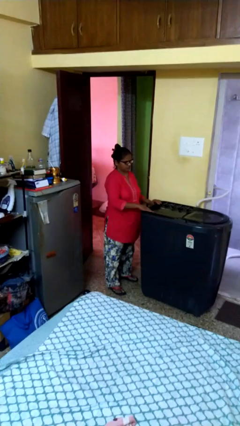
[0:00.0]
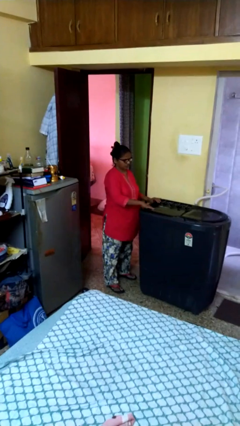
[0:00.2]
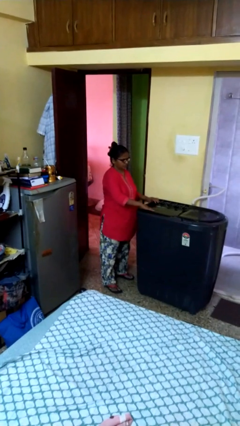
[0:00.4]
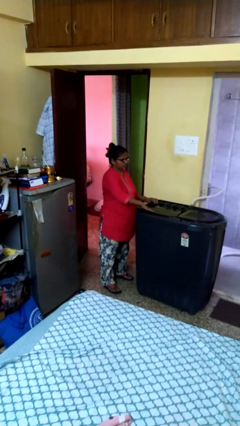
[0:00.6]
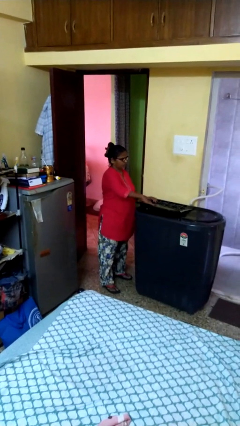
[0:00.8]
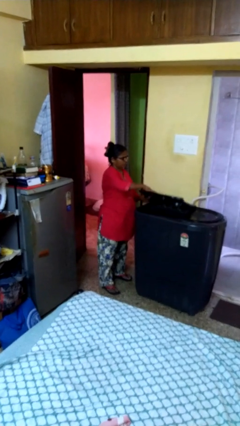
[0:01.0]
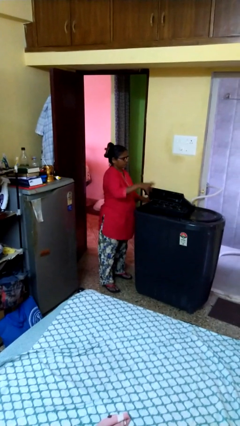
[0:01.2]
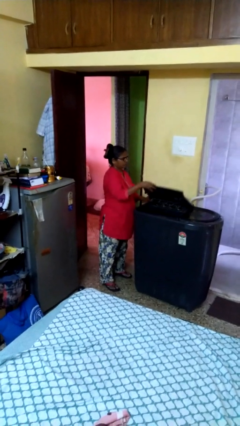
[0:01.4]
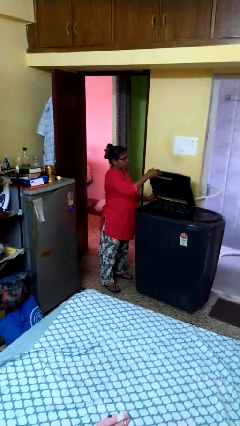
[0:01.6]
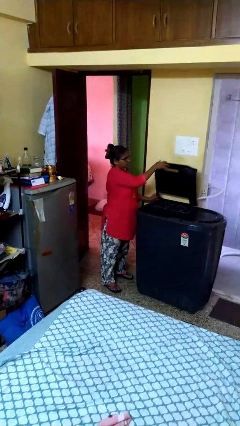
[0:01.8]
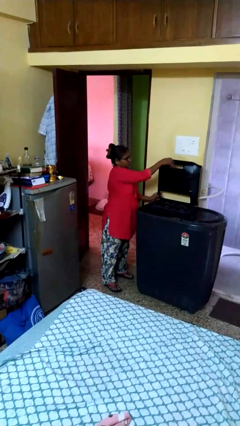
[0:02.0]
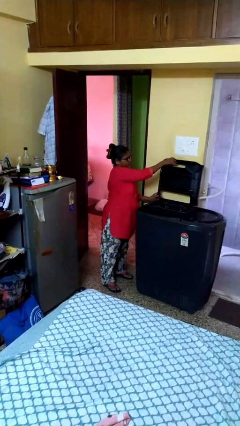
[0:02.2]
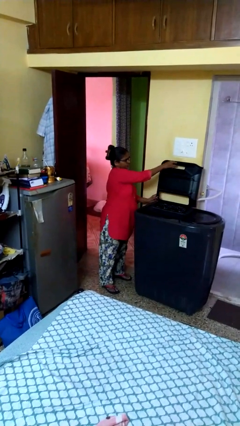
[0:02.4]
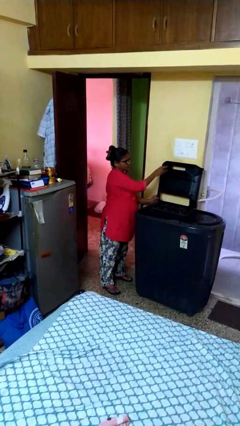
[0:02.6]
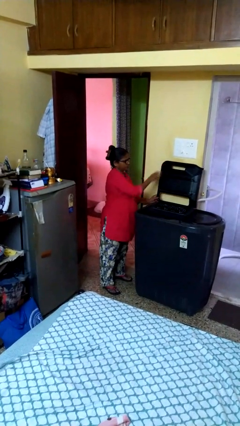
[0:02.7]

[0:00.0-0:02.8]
person opens clothes washer

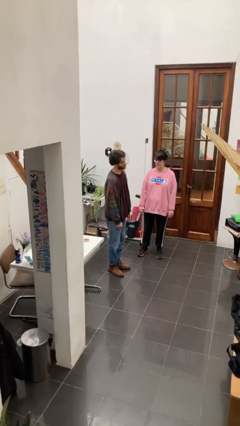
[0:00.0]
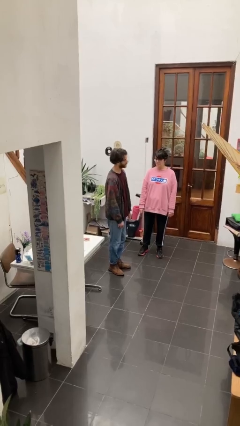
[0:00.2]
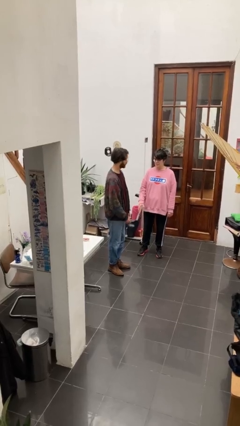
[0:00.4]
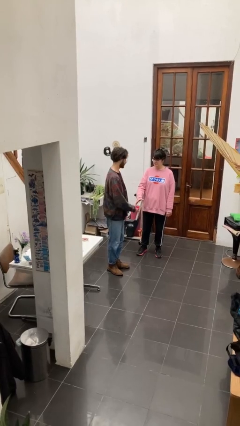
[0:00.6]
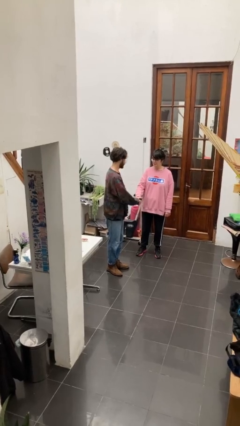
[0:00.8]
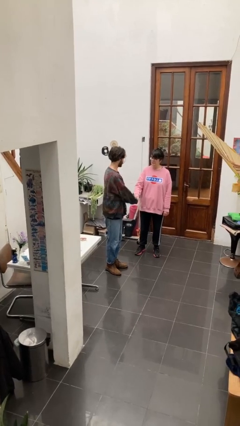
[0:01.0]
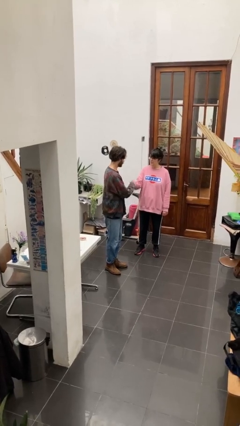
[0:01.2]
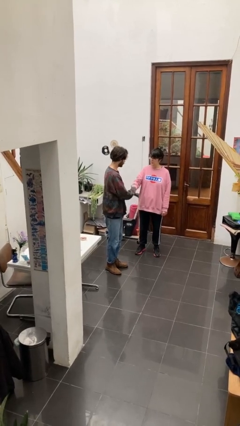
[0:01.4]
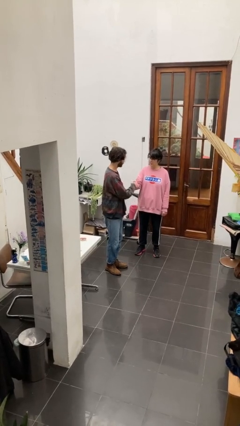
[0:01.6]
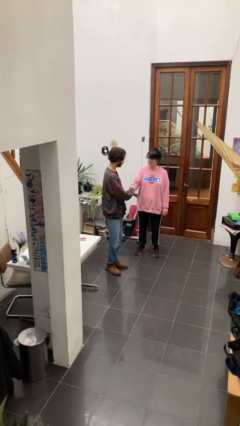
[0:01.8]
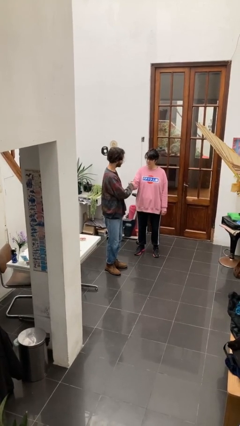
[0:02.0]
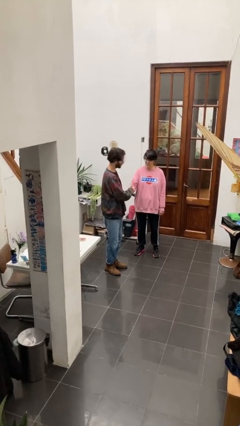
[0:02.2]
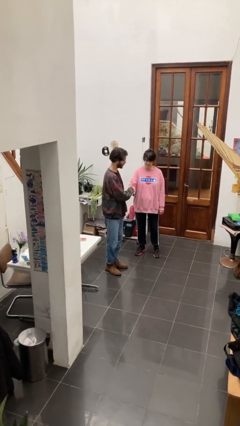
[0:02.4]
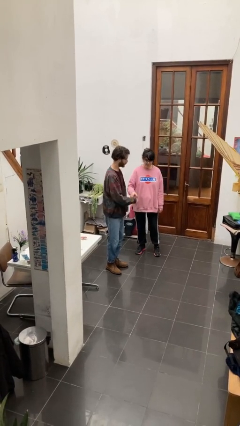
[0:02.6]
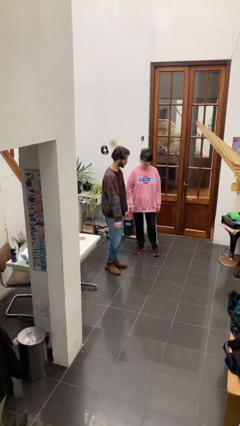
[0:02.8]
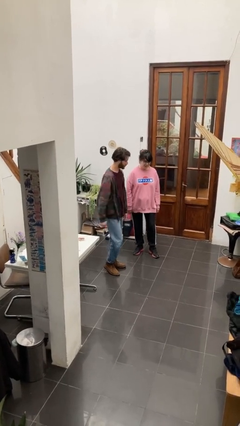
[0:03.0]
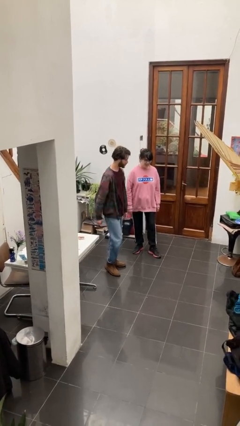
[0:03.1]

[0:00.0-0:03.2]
person shakes hand

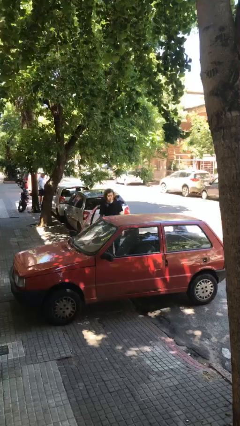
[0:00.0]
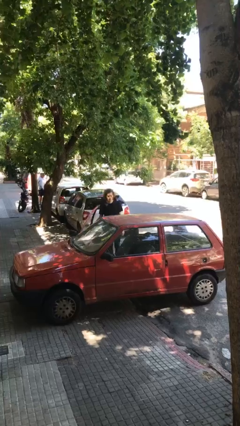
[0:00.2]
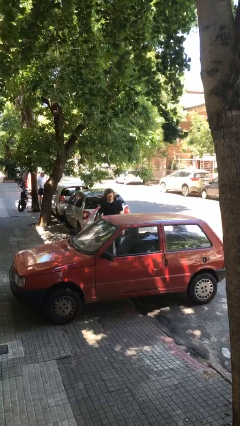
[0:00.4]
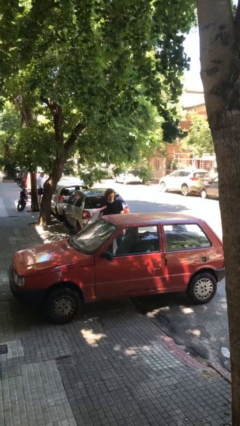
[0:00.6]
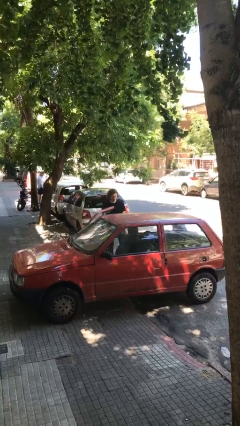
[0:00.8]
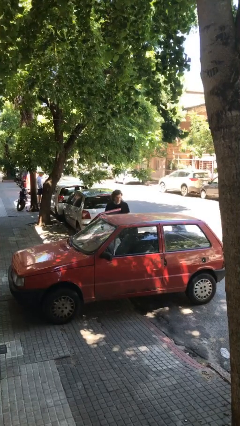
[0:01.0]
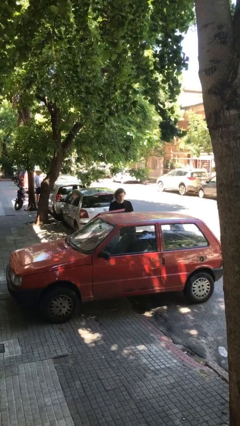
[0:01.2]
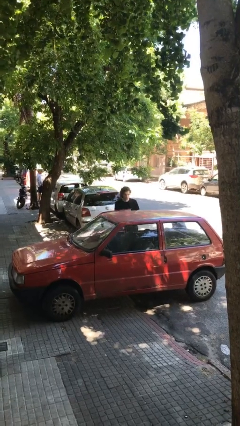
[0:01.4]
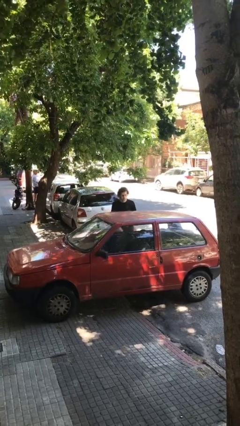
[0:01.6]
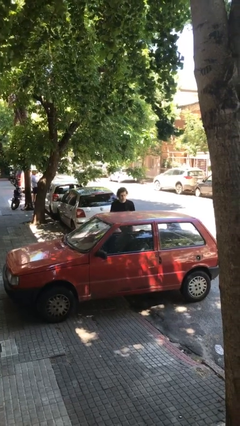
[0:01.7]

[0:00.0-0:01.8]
person closes car door

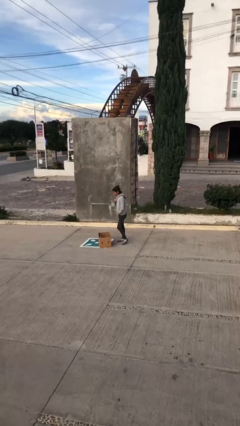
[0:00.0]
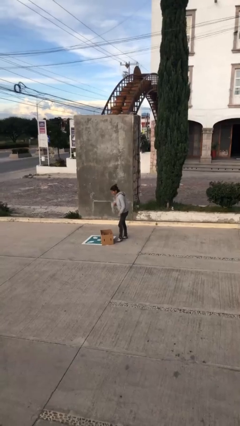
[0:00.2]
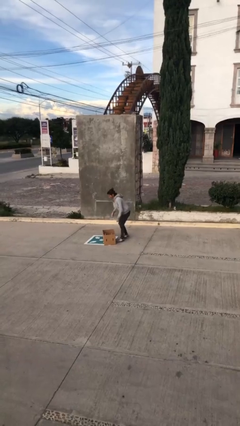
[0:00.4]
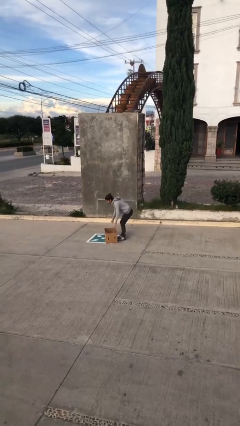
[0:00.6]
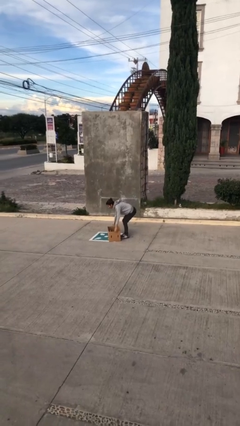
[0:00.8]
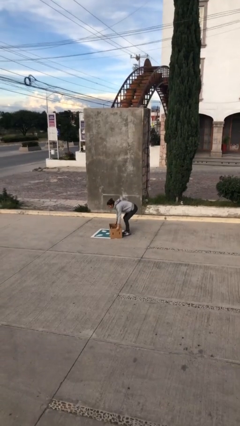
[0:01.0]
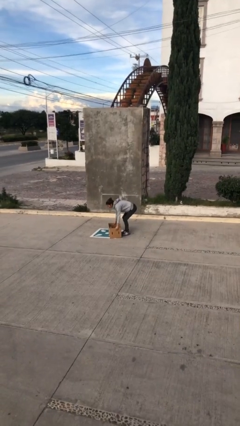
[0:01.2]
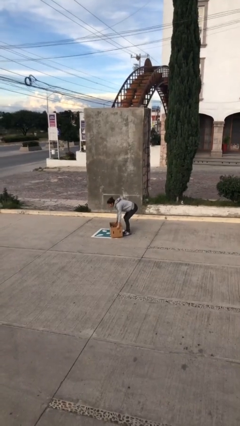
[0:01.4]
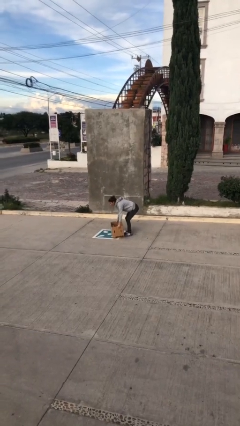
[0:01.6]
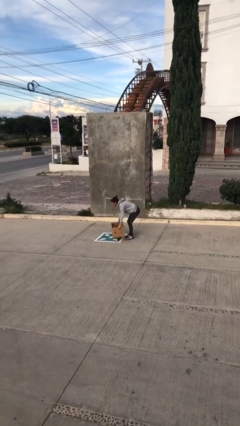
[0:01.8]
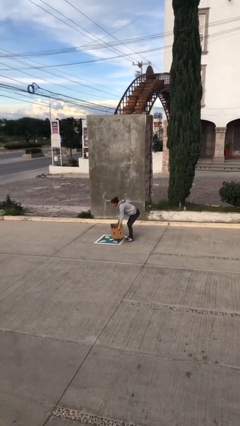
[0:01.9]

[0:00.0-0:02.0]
person picks up object from floor

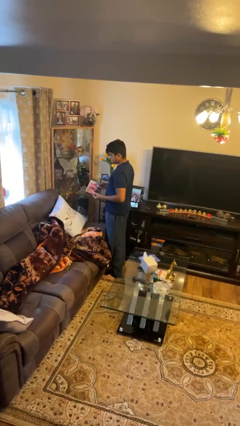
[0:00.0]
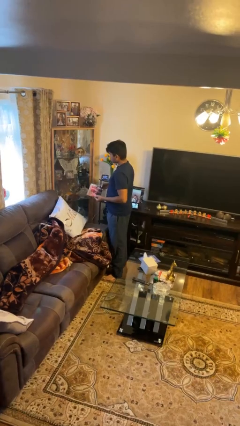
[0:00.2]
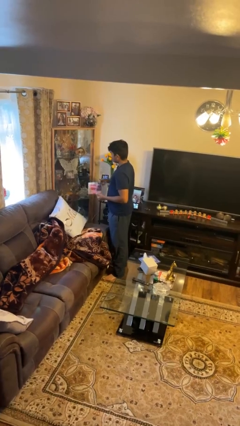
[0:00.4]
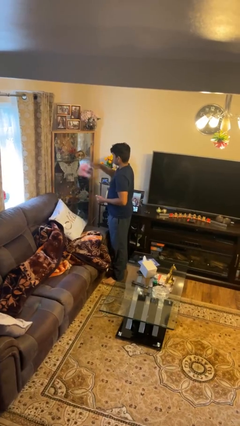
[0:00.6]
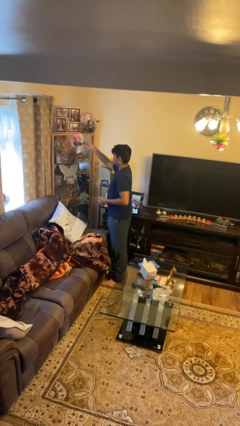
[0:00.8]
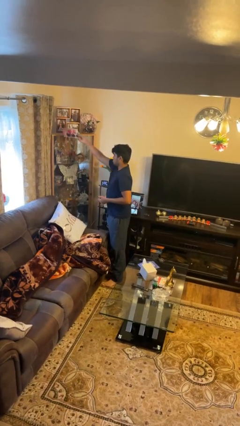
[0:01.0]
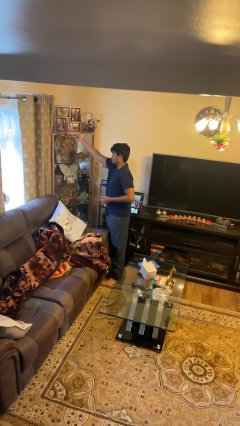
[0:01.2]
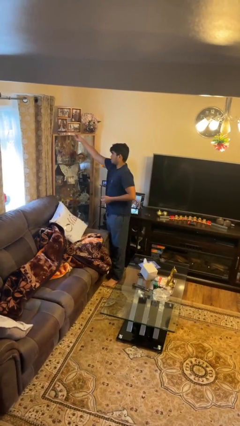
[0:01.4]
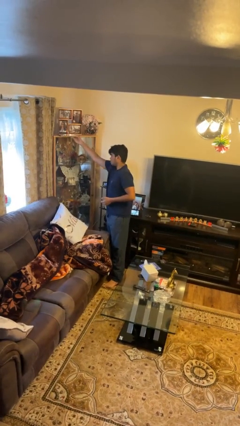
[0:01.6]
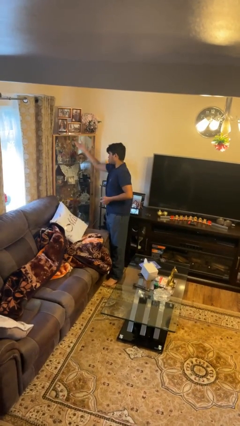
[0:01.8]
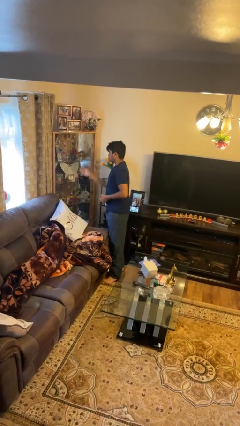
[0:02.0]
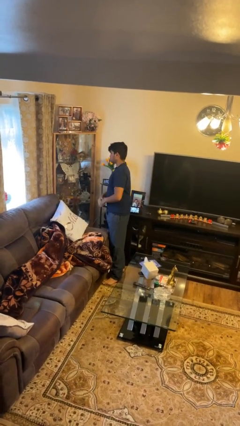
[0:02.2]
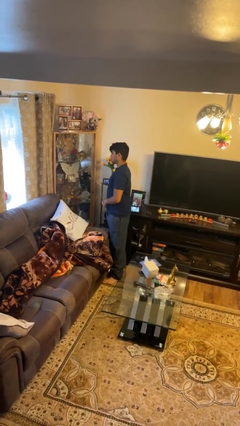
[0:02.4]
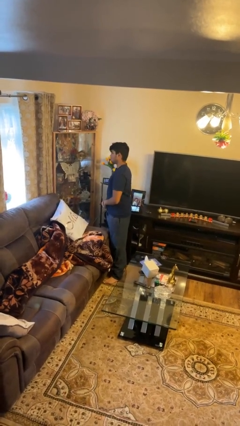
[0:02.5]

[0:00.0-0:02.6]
person puts down object on shelf

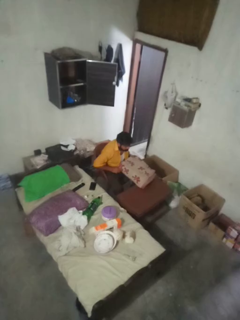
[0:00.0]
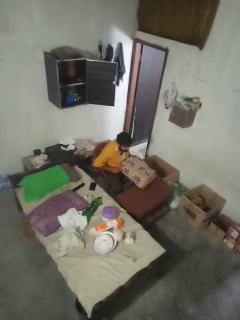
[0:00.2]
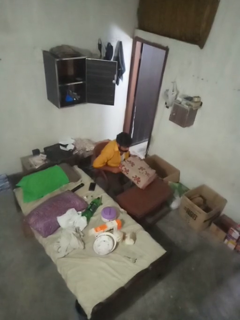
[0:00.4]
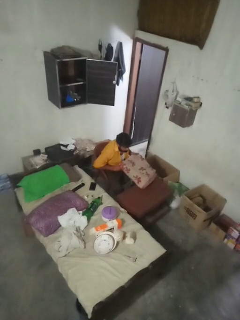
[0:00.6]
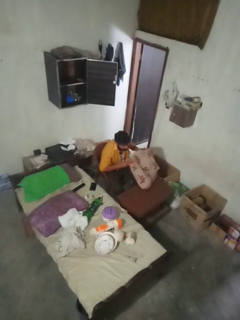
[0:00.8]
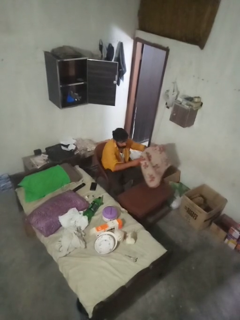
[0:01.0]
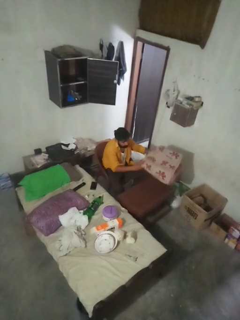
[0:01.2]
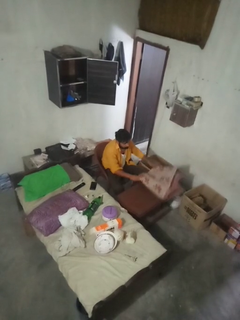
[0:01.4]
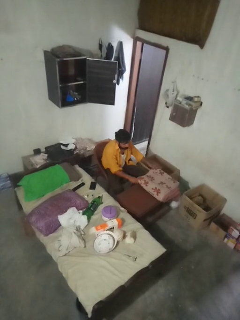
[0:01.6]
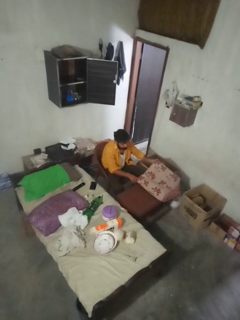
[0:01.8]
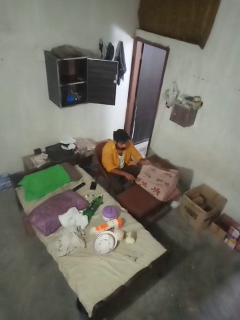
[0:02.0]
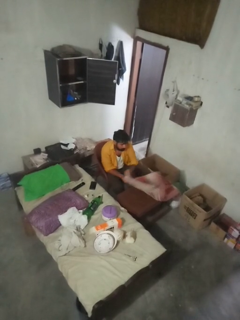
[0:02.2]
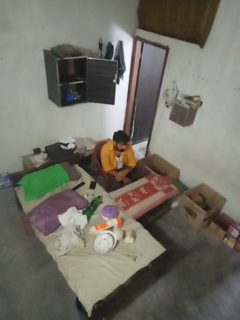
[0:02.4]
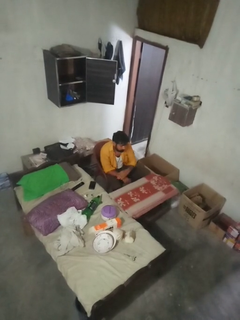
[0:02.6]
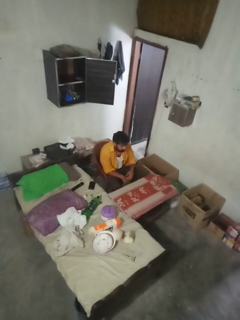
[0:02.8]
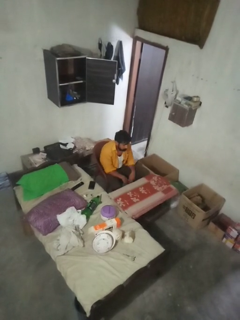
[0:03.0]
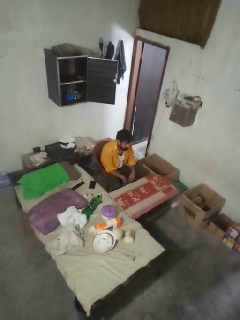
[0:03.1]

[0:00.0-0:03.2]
person spreads tablecloth

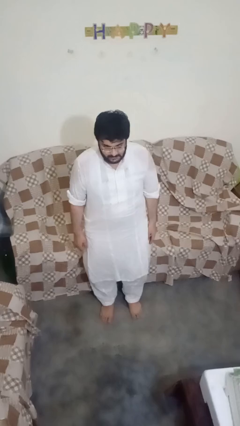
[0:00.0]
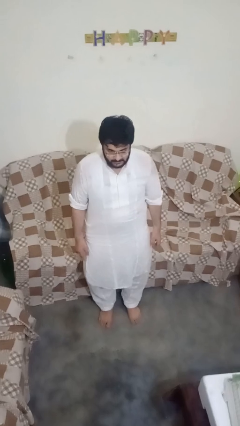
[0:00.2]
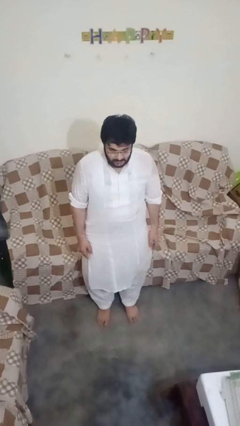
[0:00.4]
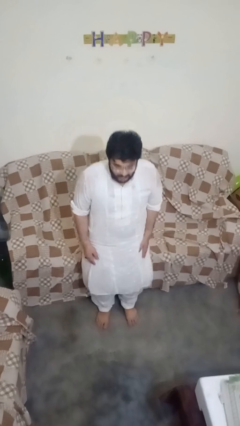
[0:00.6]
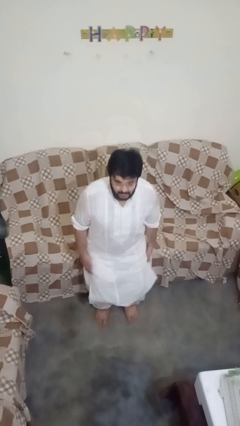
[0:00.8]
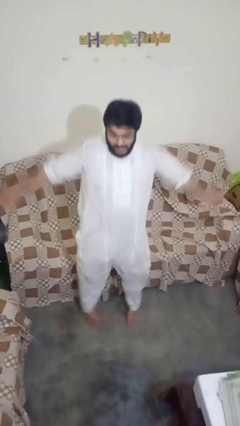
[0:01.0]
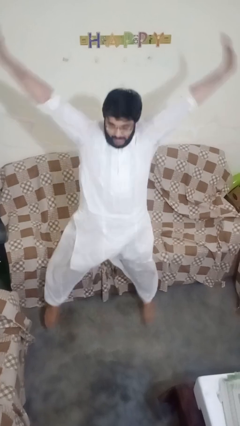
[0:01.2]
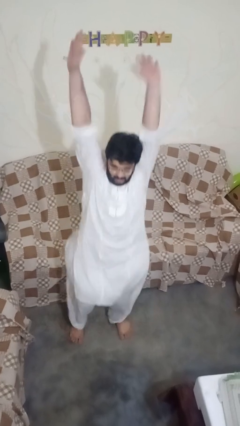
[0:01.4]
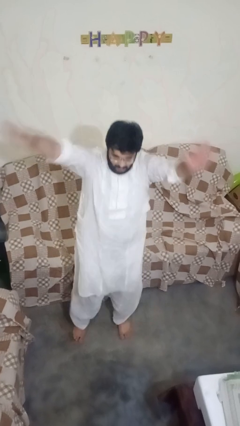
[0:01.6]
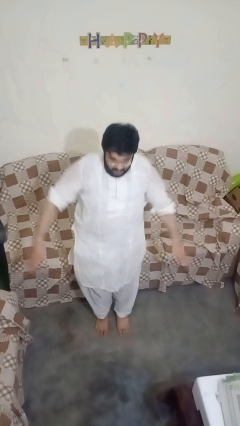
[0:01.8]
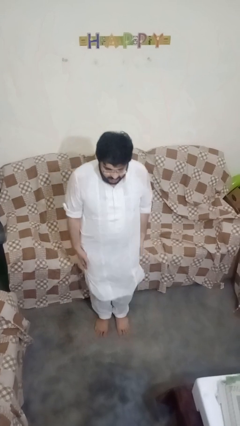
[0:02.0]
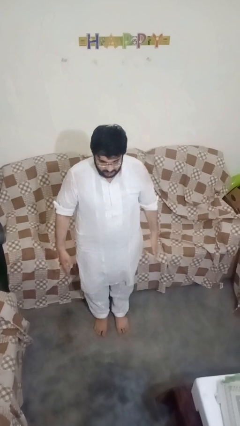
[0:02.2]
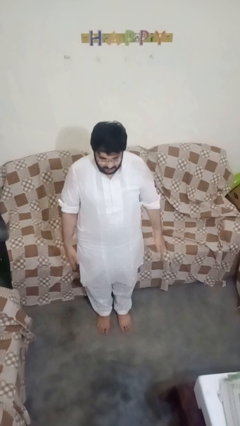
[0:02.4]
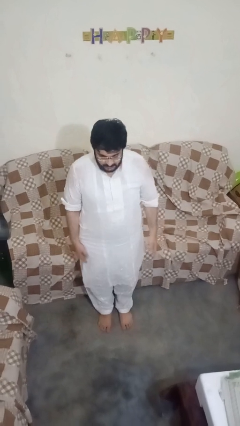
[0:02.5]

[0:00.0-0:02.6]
person exercises with jumping jacks
